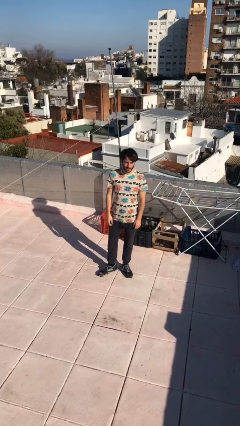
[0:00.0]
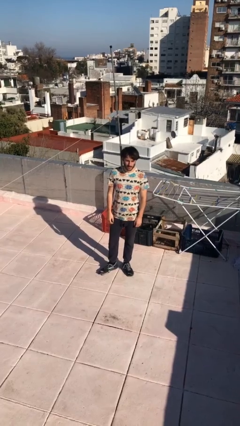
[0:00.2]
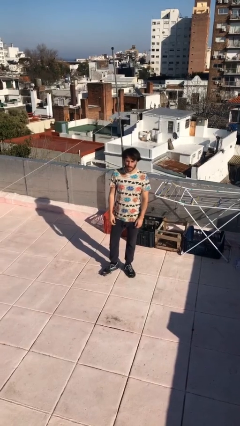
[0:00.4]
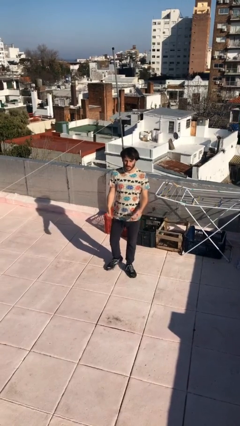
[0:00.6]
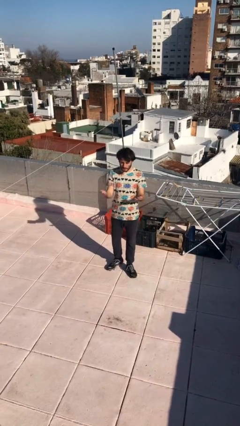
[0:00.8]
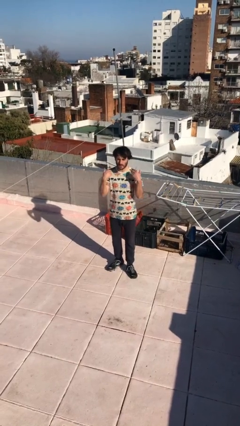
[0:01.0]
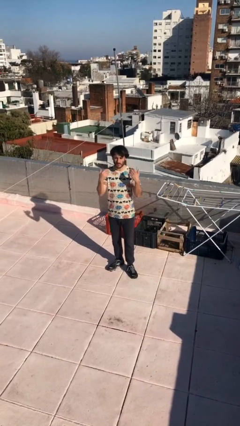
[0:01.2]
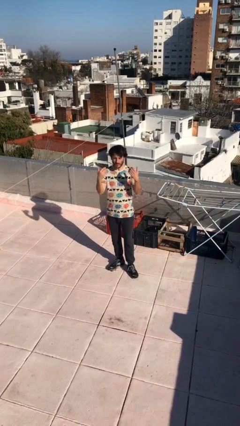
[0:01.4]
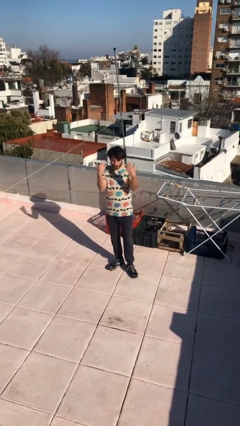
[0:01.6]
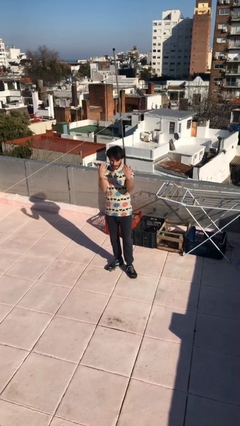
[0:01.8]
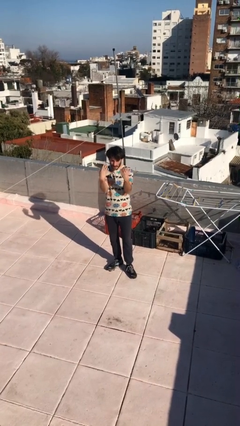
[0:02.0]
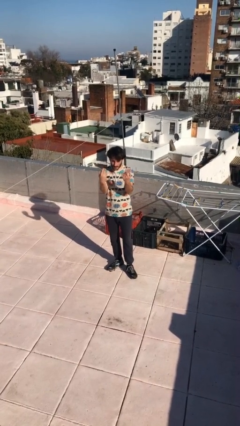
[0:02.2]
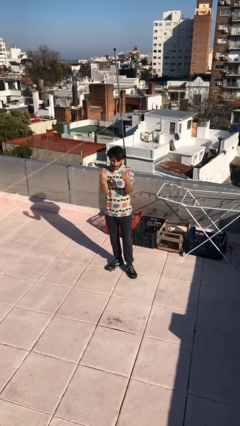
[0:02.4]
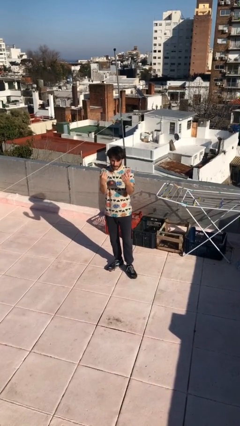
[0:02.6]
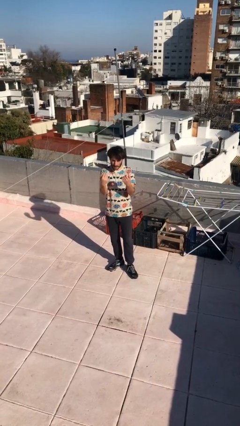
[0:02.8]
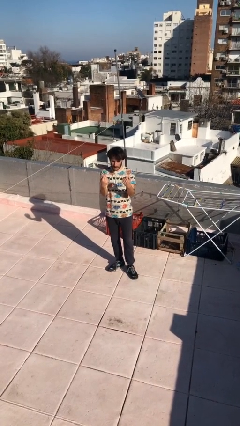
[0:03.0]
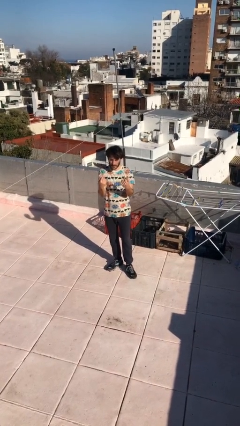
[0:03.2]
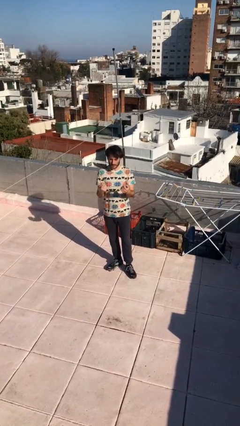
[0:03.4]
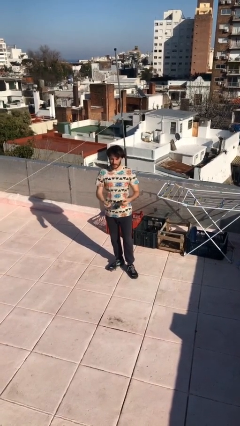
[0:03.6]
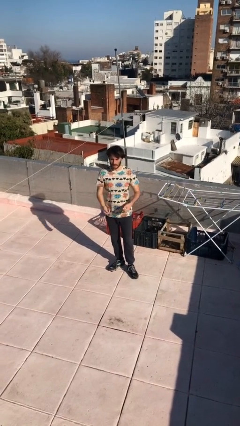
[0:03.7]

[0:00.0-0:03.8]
person gestures come here

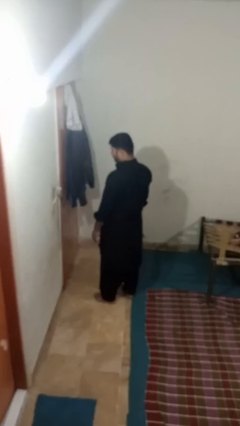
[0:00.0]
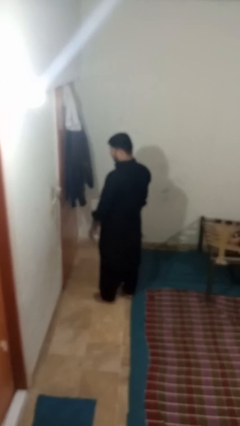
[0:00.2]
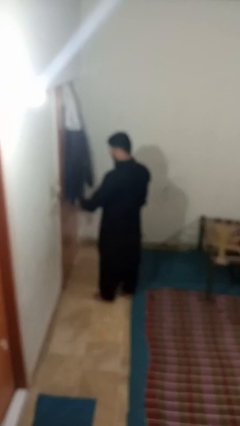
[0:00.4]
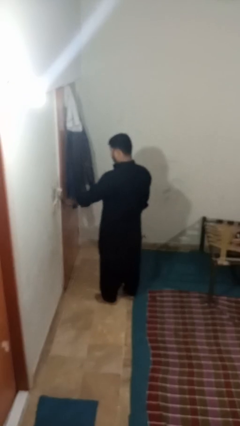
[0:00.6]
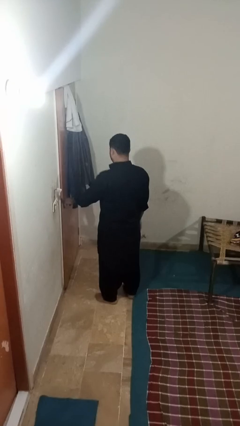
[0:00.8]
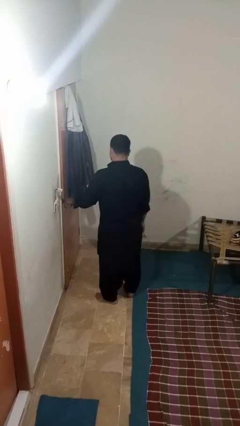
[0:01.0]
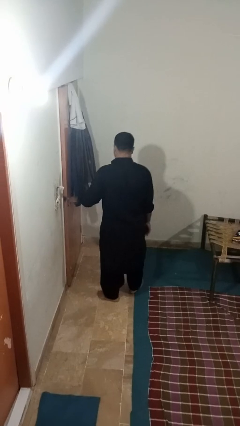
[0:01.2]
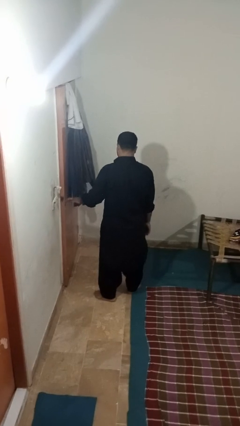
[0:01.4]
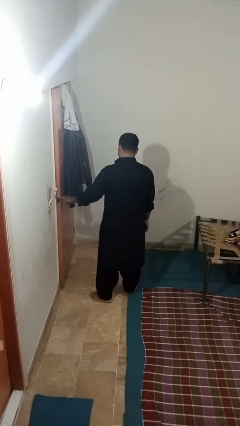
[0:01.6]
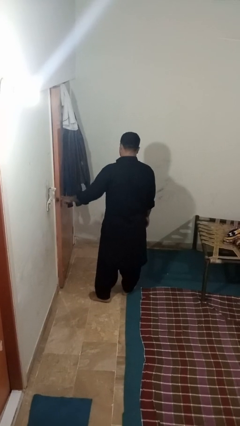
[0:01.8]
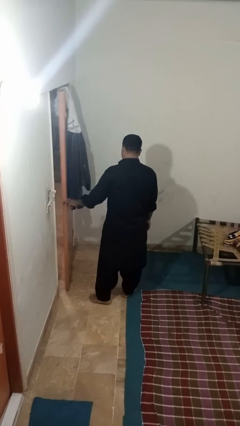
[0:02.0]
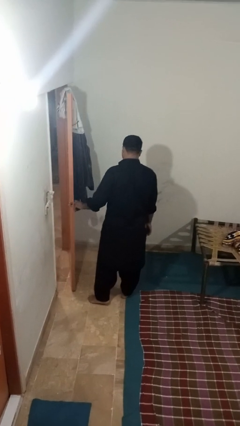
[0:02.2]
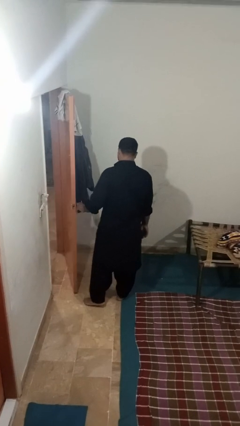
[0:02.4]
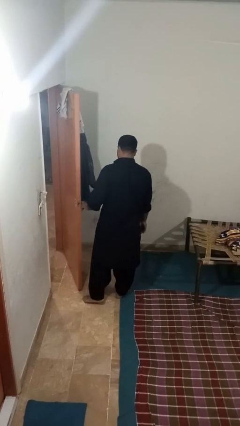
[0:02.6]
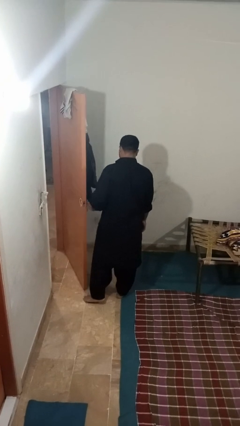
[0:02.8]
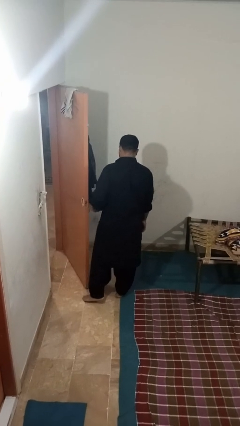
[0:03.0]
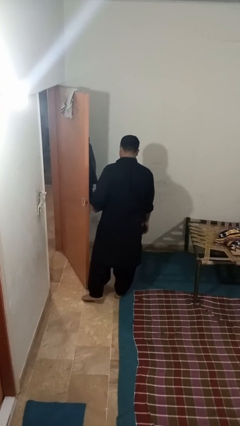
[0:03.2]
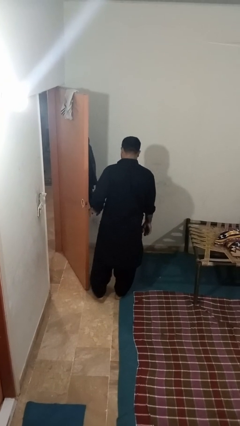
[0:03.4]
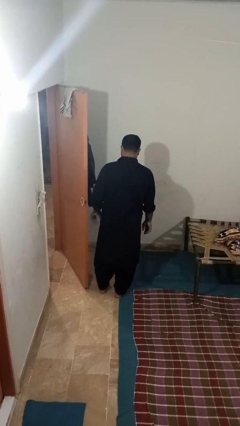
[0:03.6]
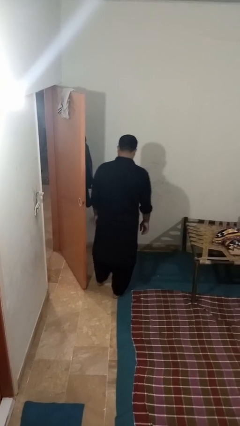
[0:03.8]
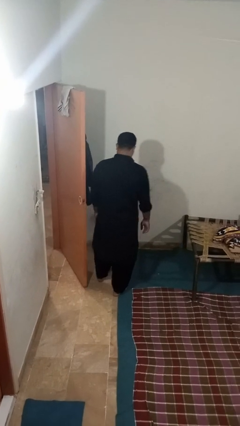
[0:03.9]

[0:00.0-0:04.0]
person opens facility door

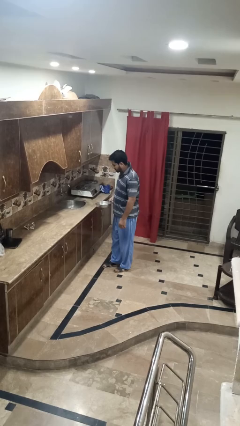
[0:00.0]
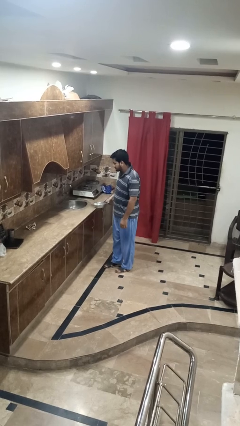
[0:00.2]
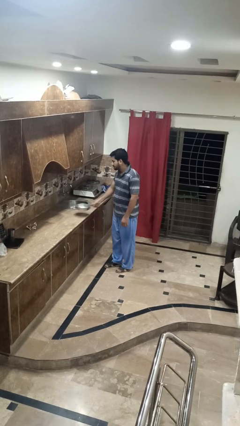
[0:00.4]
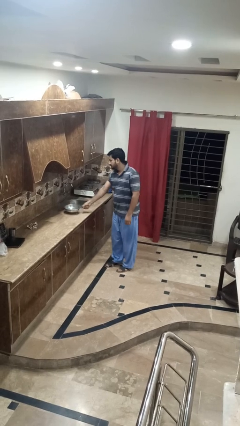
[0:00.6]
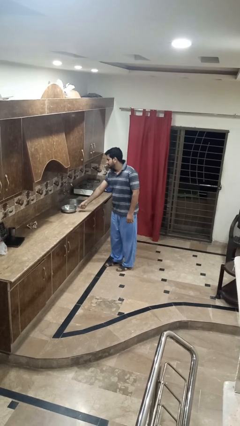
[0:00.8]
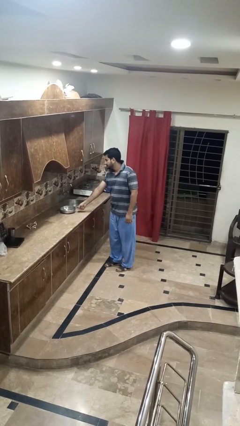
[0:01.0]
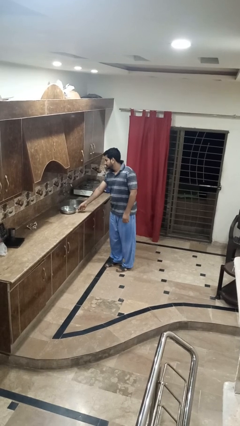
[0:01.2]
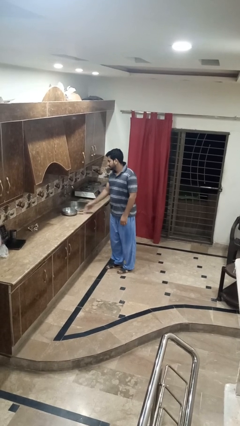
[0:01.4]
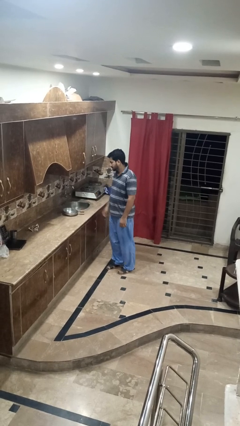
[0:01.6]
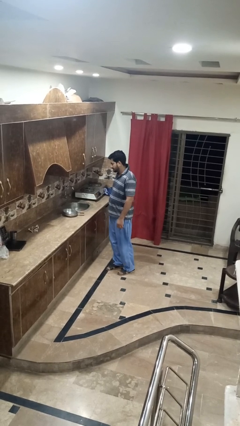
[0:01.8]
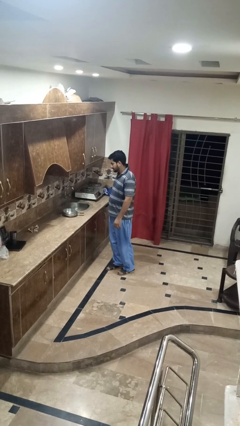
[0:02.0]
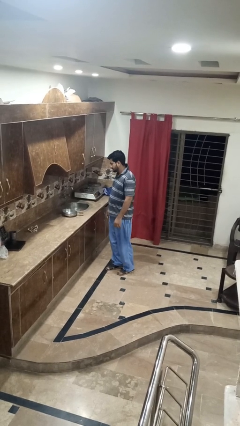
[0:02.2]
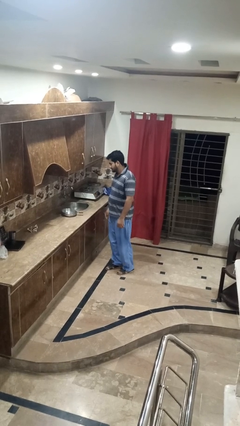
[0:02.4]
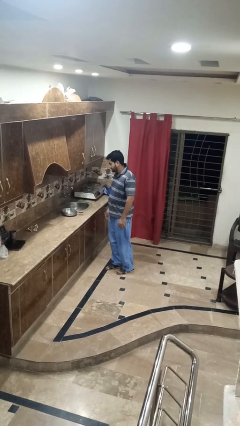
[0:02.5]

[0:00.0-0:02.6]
person puts down object on countertop

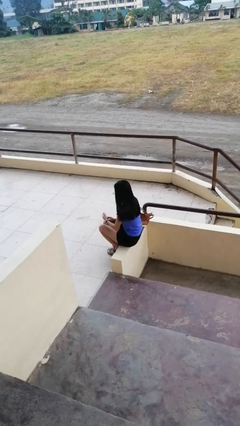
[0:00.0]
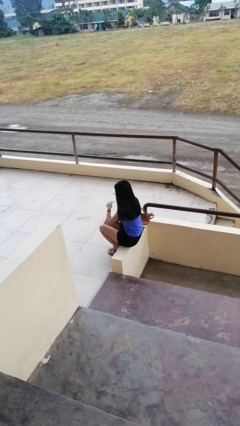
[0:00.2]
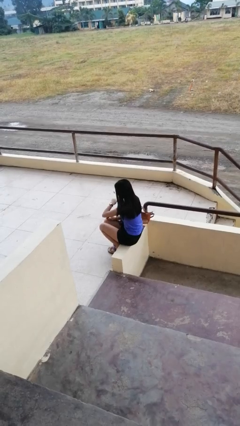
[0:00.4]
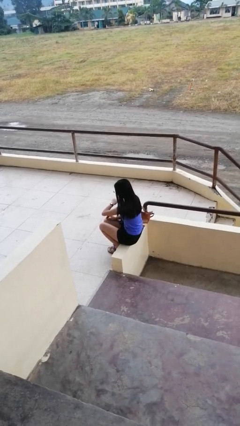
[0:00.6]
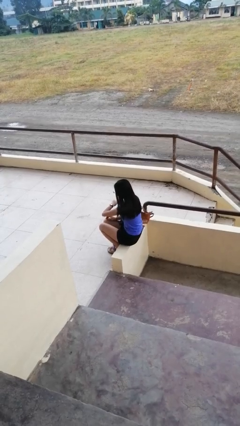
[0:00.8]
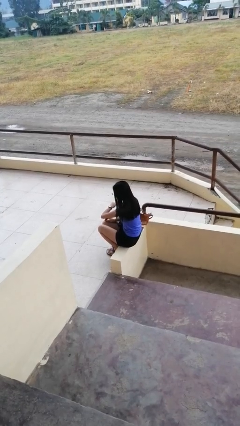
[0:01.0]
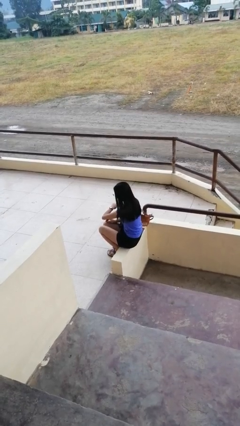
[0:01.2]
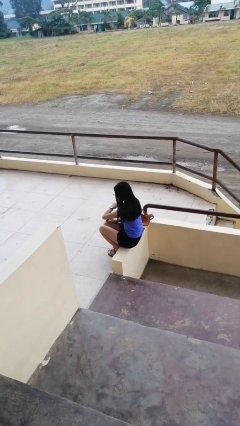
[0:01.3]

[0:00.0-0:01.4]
person looks at wristwatch

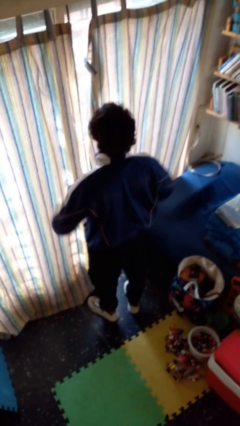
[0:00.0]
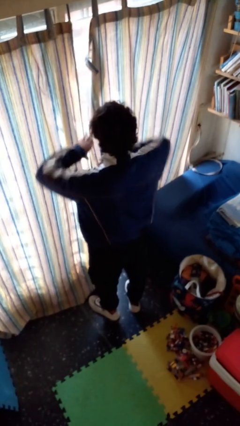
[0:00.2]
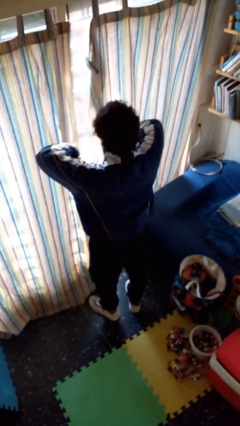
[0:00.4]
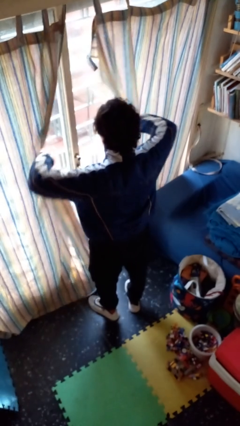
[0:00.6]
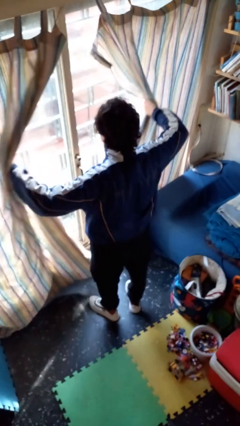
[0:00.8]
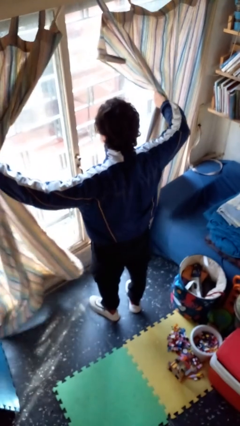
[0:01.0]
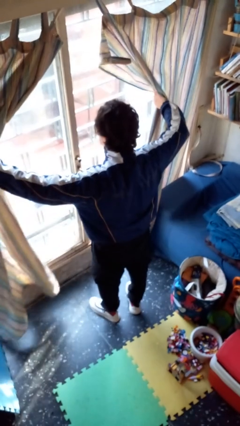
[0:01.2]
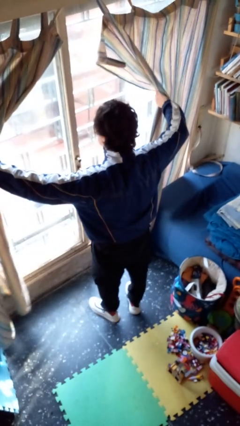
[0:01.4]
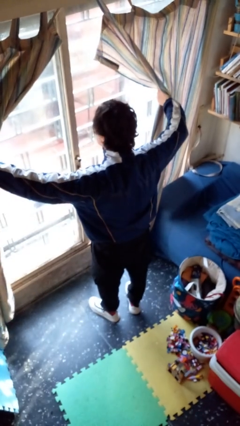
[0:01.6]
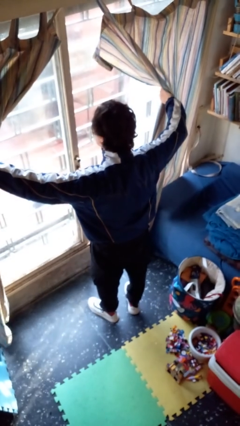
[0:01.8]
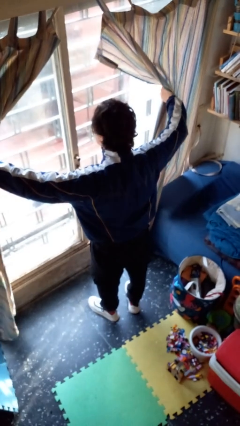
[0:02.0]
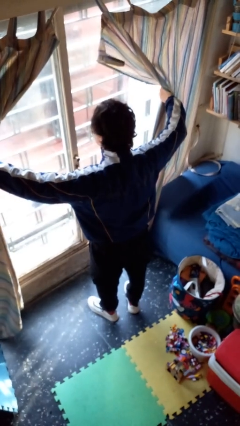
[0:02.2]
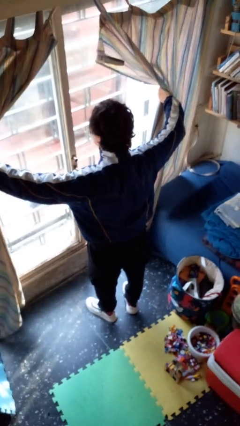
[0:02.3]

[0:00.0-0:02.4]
person opens curtains

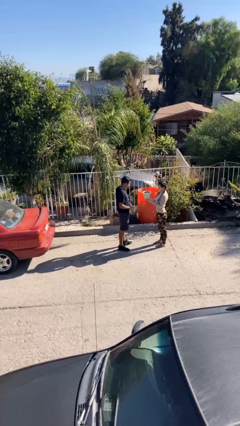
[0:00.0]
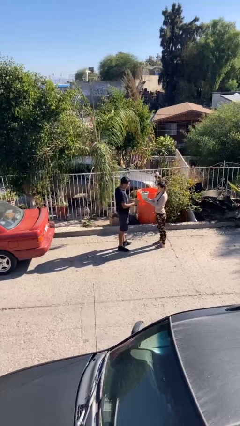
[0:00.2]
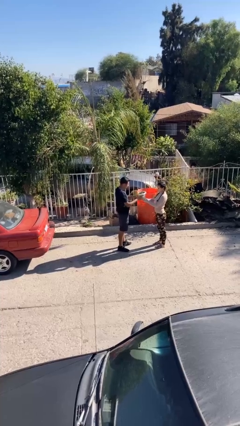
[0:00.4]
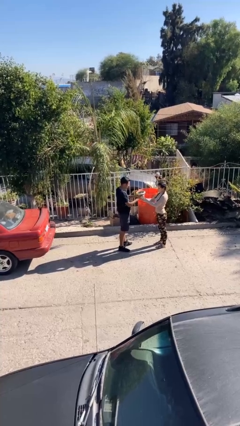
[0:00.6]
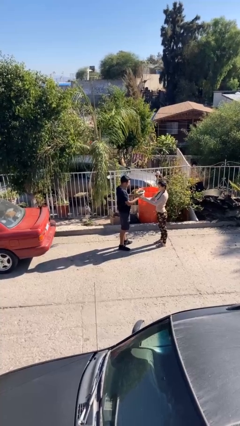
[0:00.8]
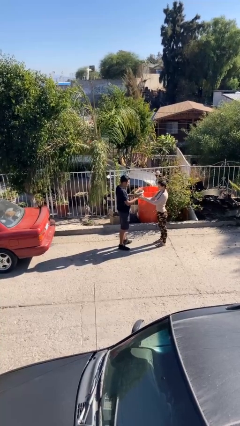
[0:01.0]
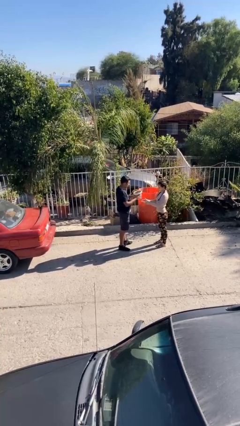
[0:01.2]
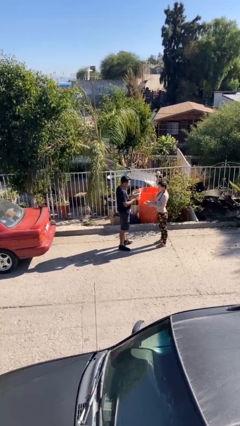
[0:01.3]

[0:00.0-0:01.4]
person transfers object to person

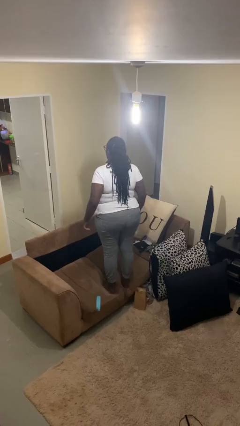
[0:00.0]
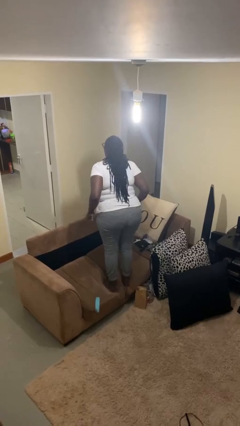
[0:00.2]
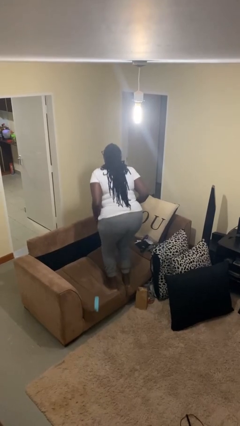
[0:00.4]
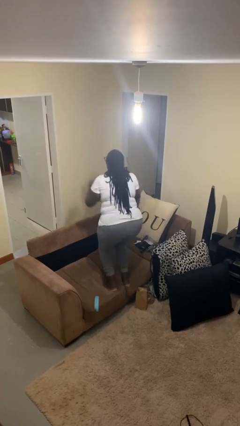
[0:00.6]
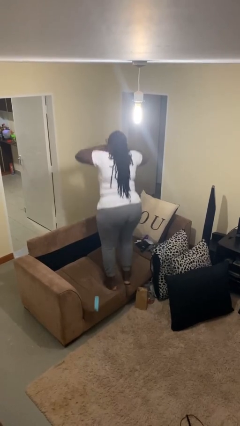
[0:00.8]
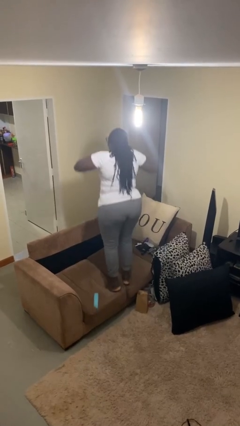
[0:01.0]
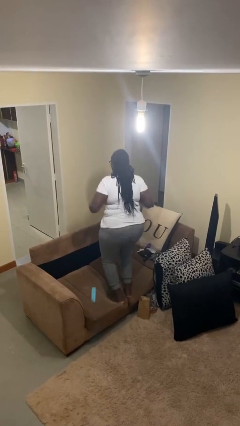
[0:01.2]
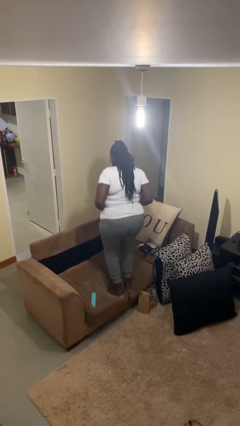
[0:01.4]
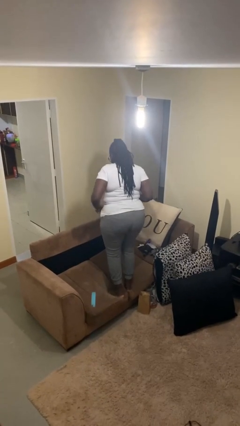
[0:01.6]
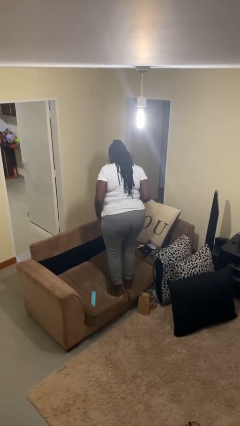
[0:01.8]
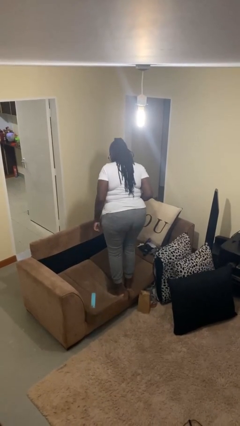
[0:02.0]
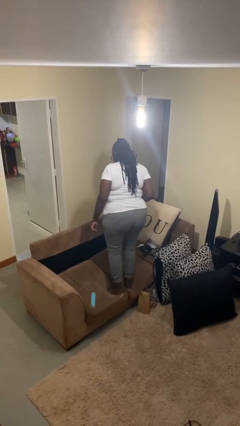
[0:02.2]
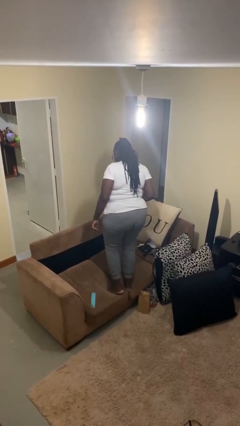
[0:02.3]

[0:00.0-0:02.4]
person jumps on couch
